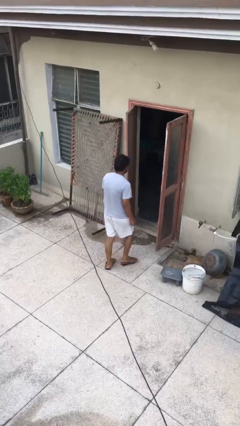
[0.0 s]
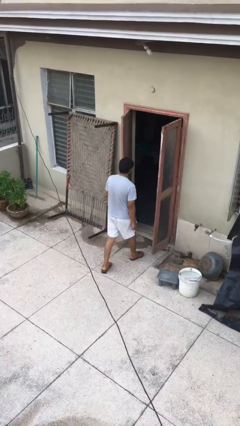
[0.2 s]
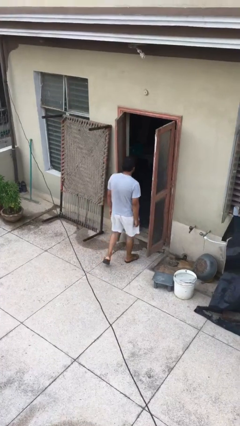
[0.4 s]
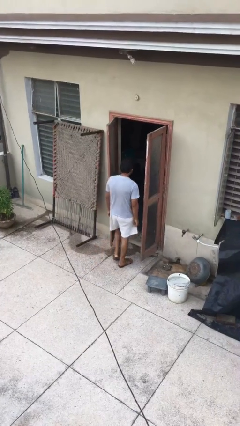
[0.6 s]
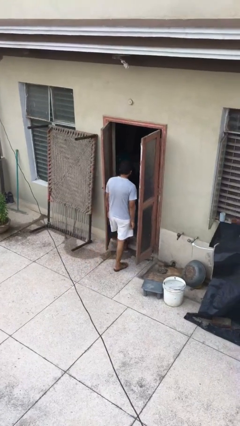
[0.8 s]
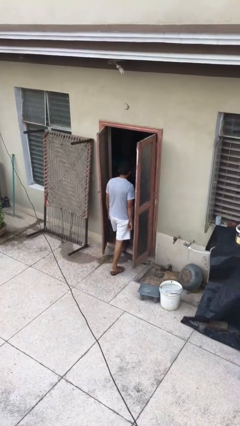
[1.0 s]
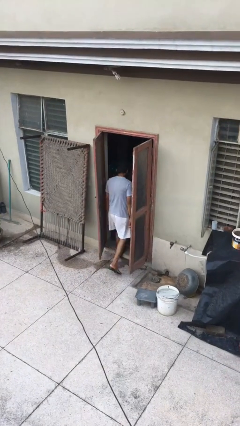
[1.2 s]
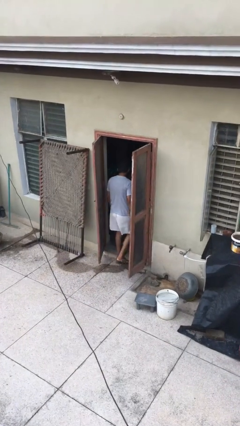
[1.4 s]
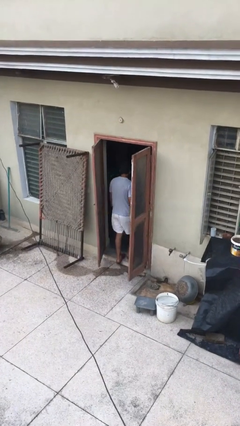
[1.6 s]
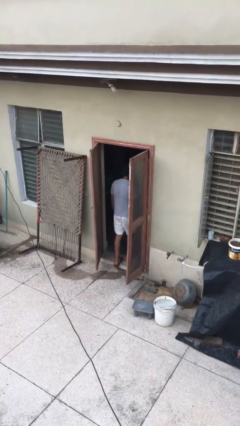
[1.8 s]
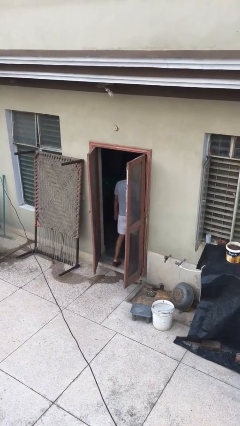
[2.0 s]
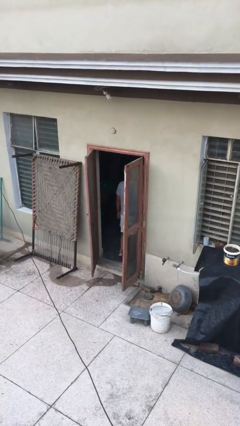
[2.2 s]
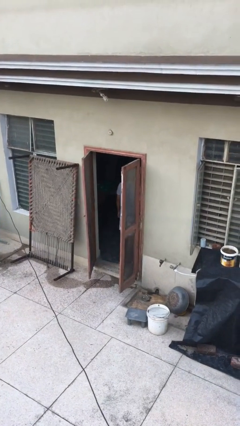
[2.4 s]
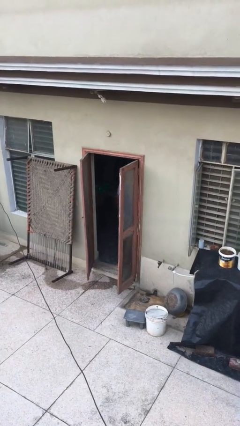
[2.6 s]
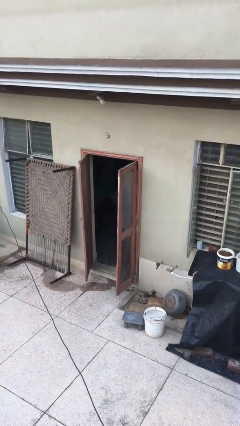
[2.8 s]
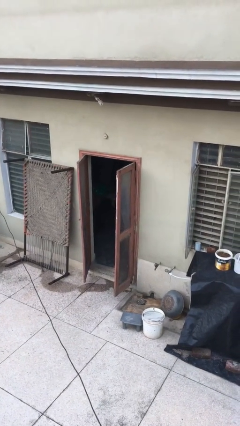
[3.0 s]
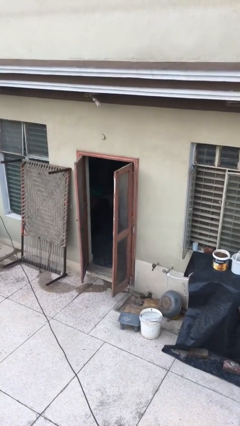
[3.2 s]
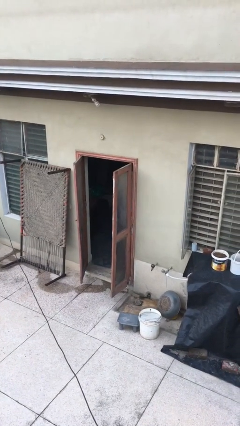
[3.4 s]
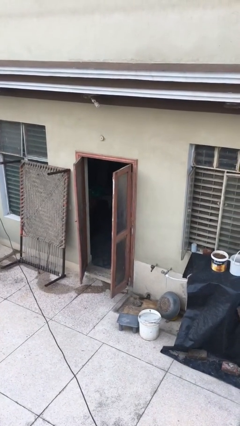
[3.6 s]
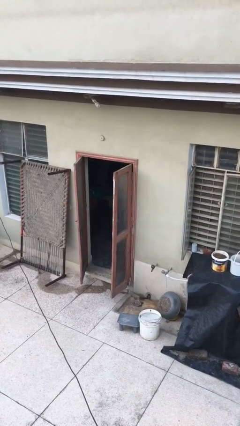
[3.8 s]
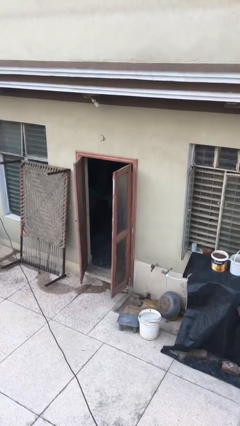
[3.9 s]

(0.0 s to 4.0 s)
person exits scene through structure

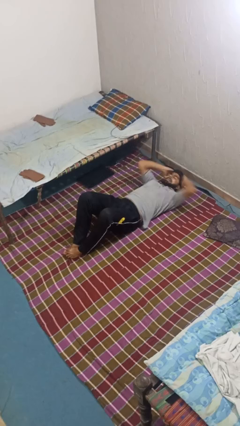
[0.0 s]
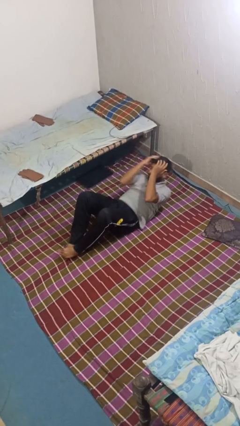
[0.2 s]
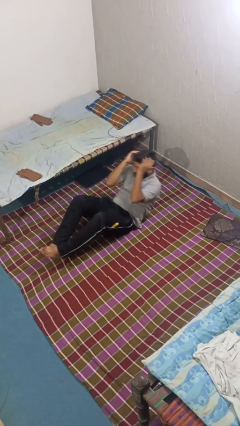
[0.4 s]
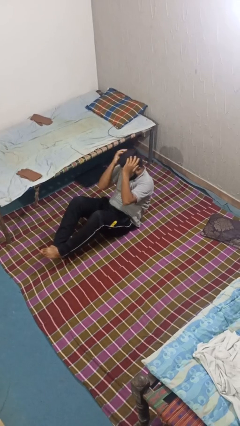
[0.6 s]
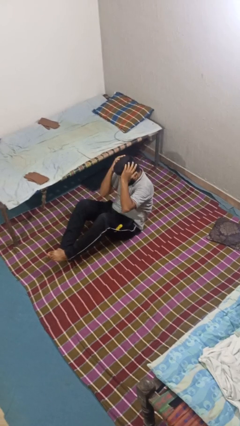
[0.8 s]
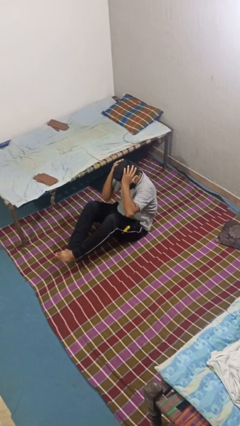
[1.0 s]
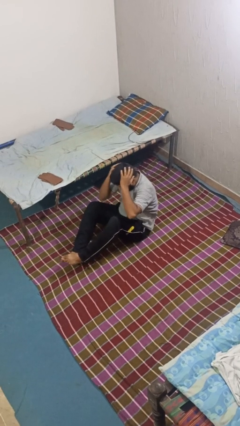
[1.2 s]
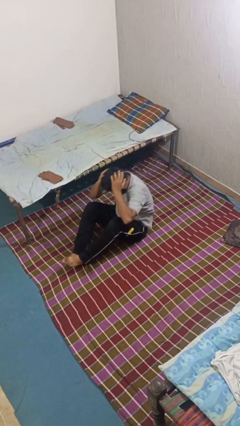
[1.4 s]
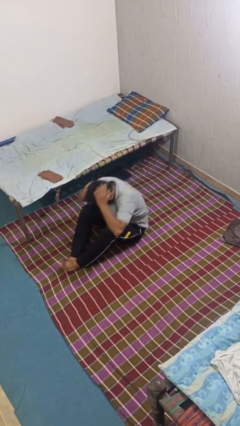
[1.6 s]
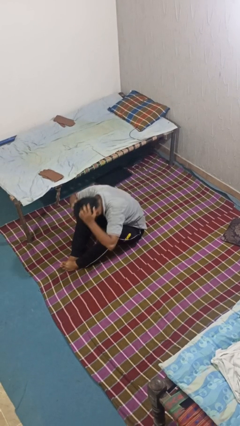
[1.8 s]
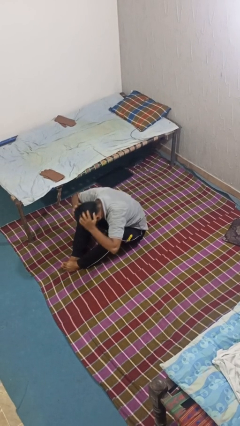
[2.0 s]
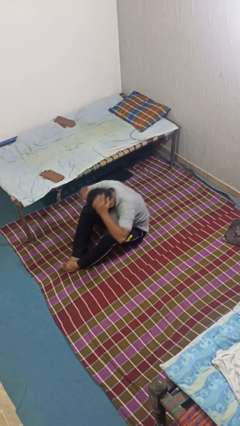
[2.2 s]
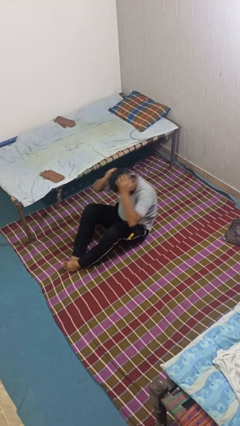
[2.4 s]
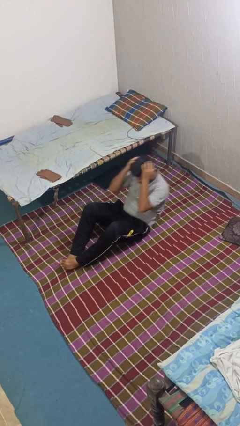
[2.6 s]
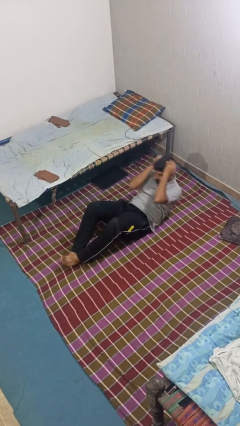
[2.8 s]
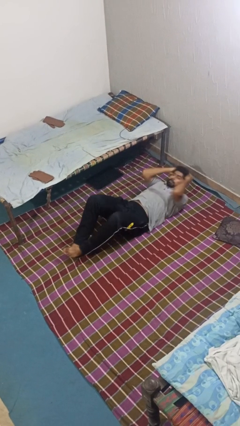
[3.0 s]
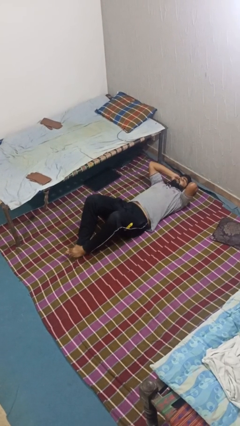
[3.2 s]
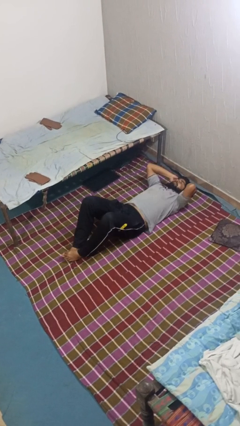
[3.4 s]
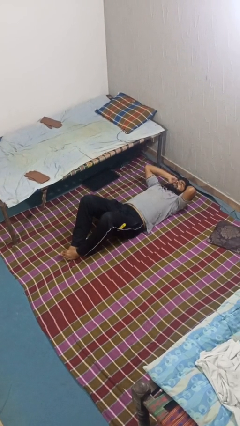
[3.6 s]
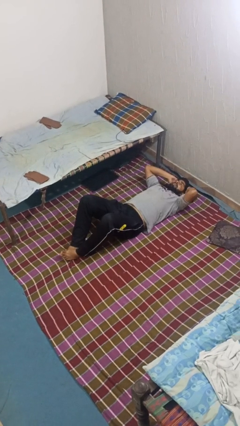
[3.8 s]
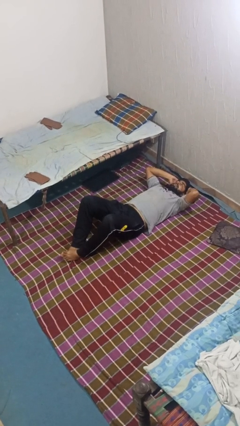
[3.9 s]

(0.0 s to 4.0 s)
person exercises with situp

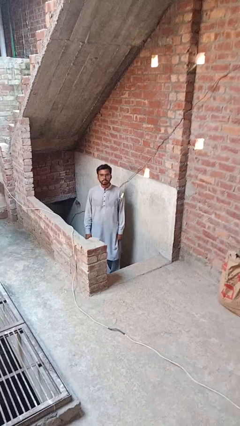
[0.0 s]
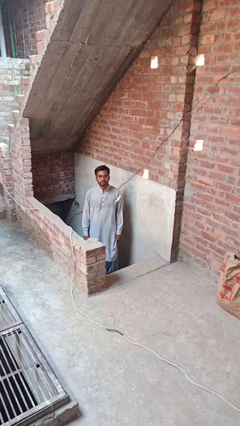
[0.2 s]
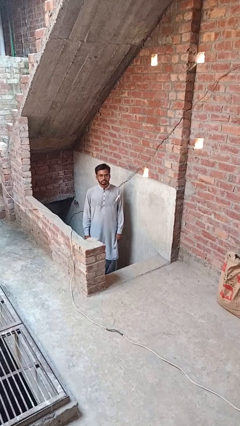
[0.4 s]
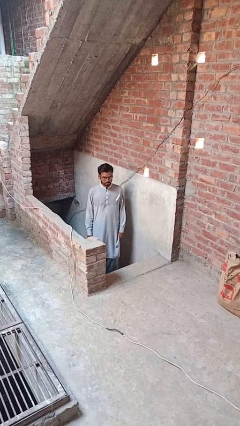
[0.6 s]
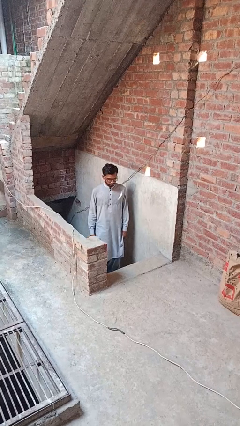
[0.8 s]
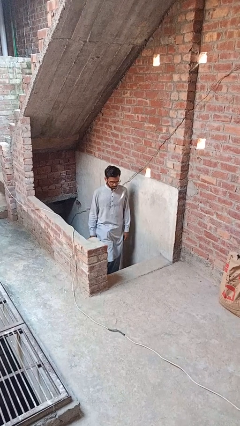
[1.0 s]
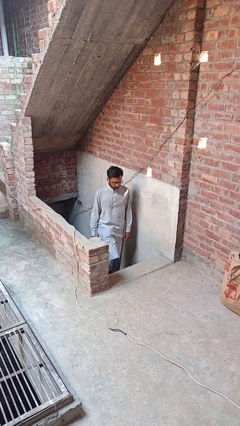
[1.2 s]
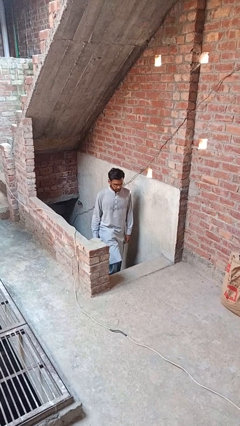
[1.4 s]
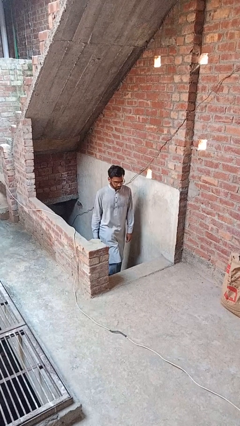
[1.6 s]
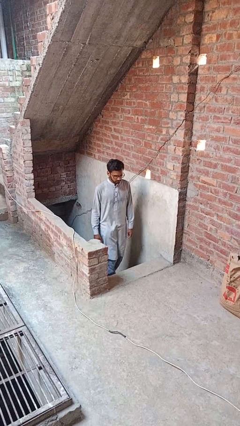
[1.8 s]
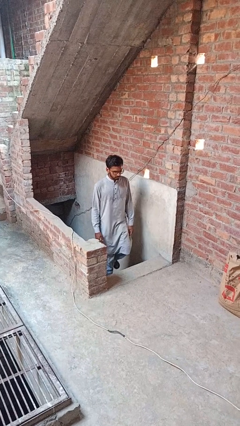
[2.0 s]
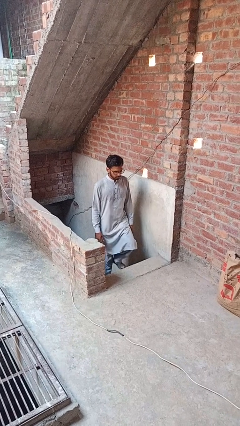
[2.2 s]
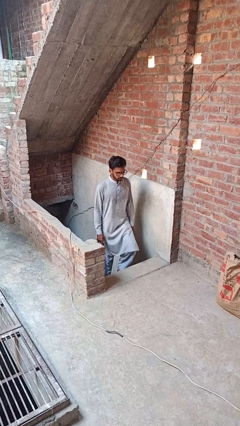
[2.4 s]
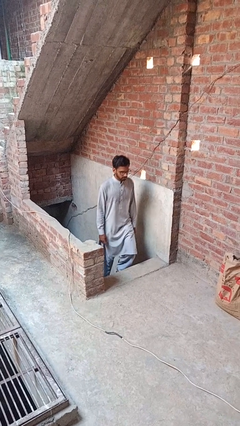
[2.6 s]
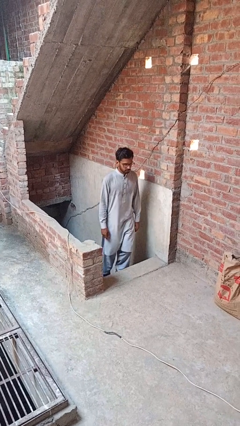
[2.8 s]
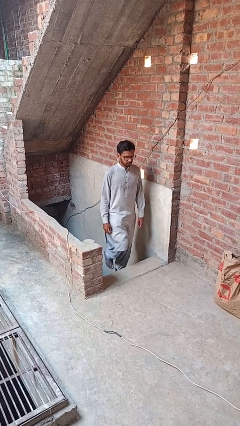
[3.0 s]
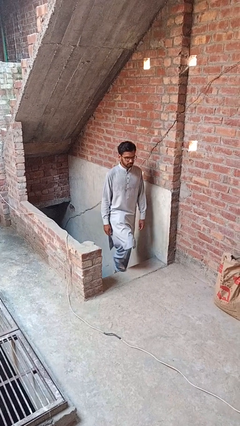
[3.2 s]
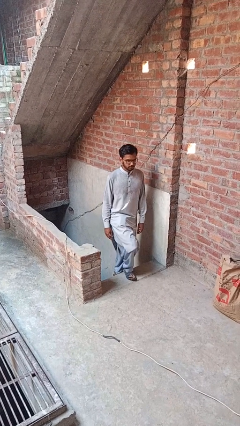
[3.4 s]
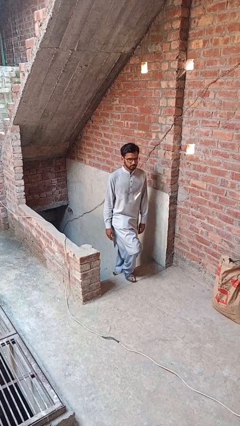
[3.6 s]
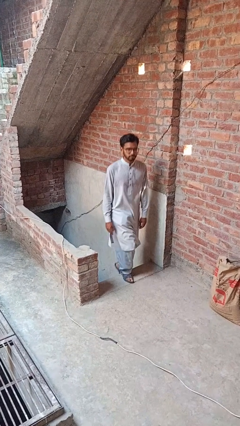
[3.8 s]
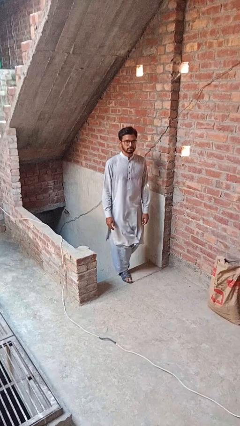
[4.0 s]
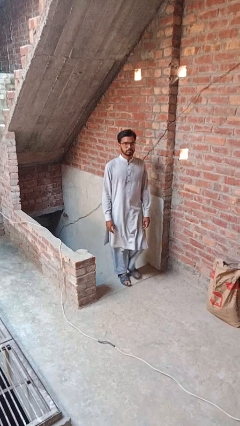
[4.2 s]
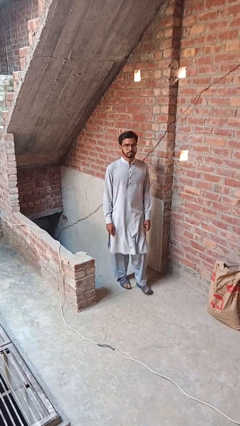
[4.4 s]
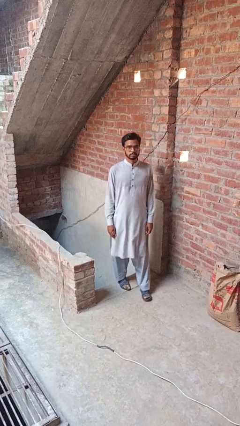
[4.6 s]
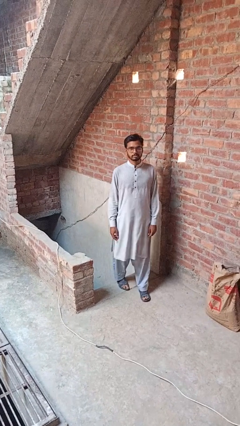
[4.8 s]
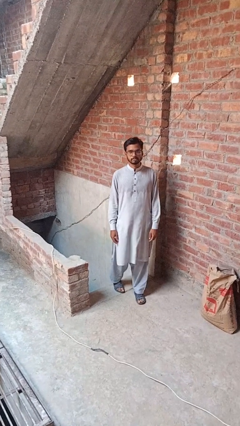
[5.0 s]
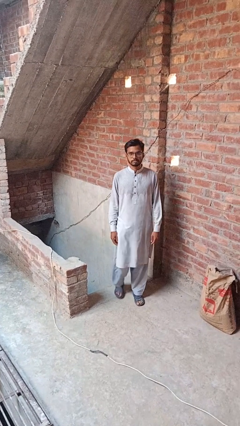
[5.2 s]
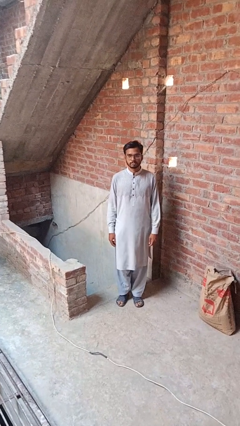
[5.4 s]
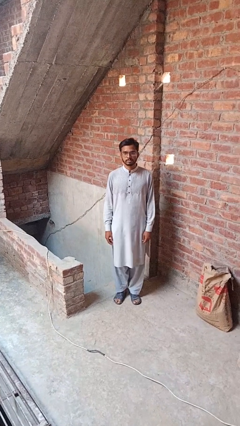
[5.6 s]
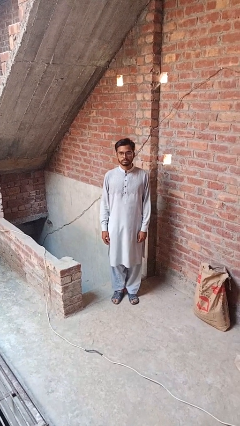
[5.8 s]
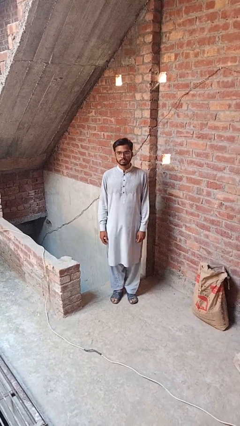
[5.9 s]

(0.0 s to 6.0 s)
person climbs up stairs

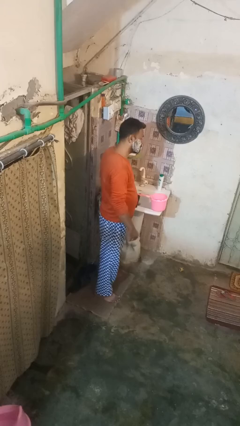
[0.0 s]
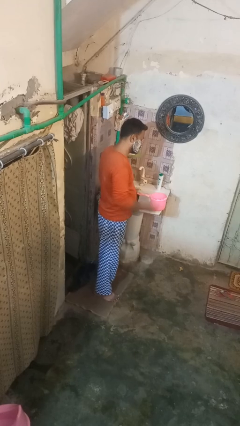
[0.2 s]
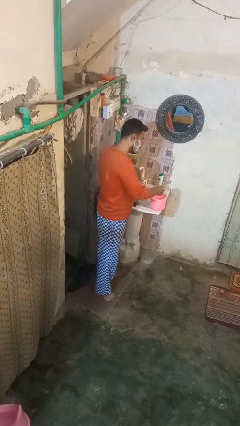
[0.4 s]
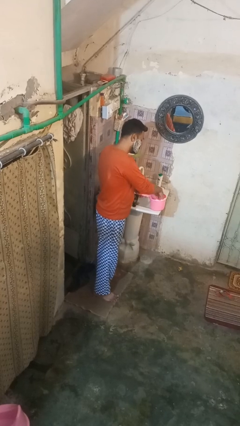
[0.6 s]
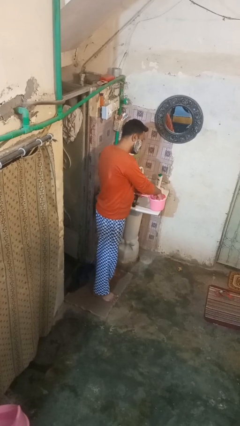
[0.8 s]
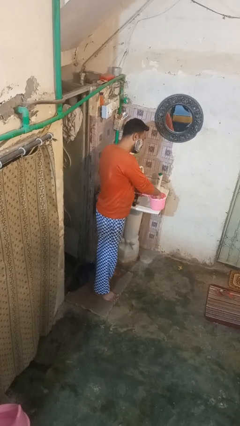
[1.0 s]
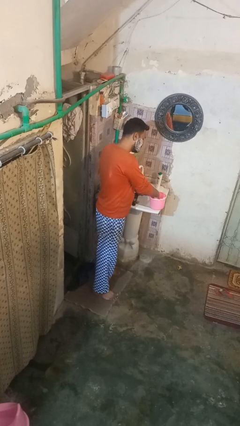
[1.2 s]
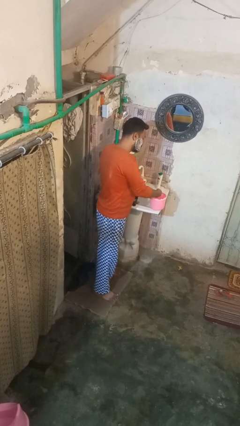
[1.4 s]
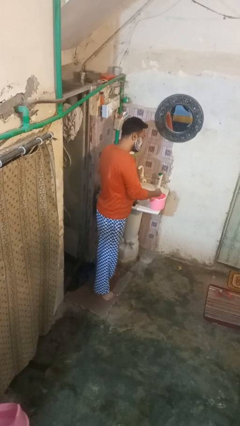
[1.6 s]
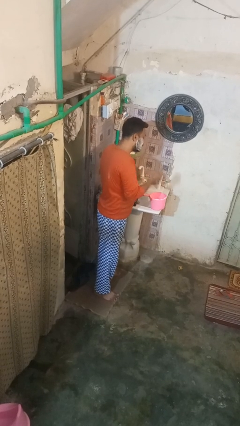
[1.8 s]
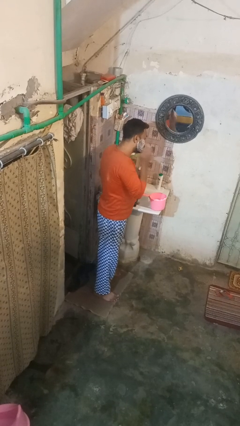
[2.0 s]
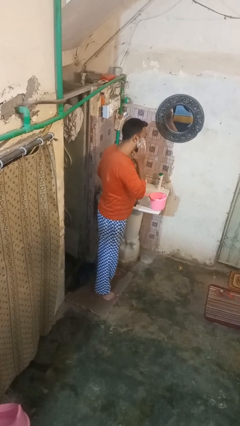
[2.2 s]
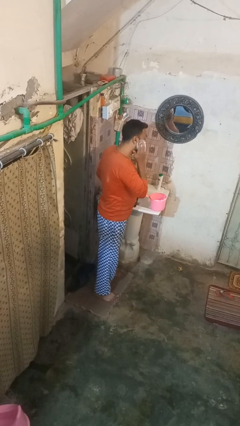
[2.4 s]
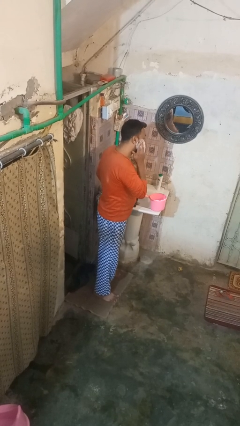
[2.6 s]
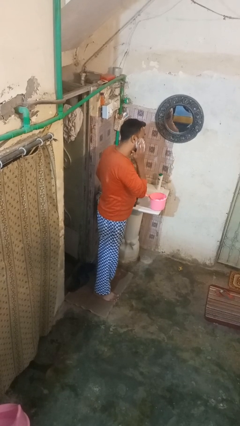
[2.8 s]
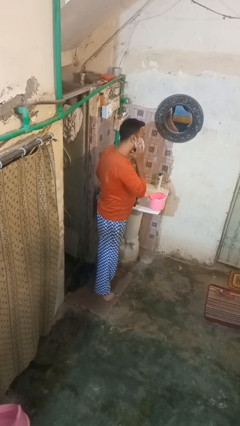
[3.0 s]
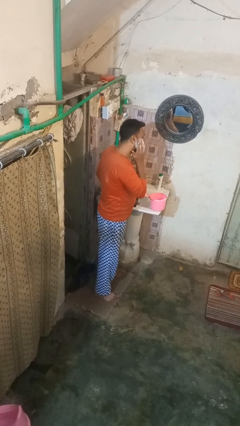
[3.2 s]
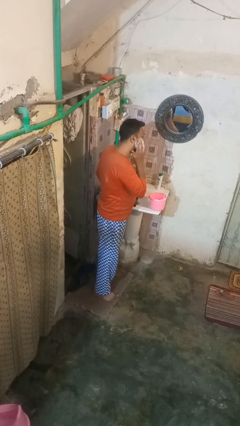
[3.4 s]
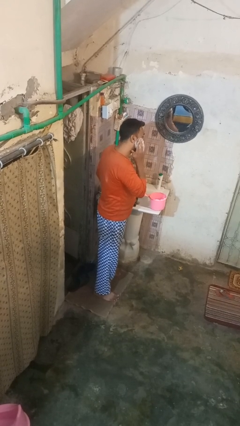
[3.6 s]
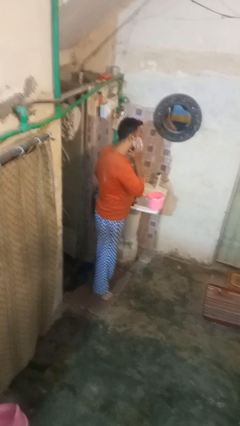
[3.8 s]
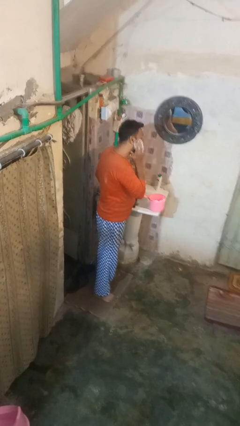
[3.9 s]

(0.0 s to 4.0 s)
person applies shaving cream
